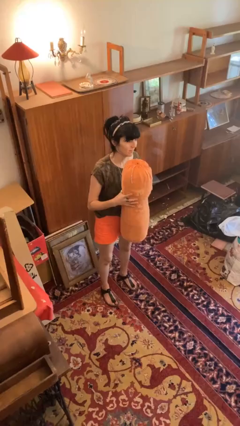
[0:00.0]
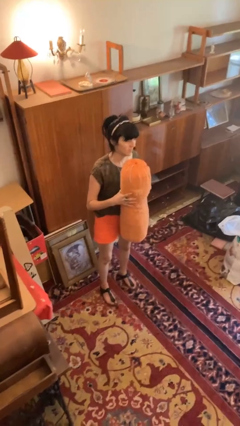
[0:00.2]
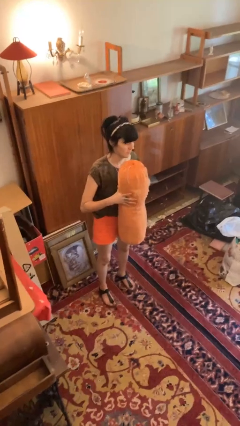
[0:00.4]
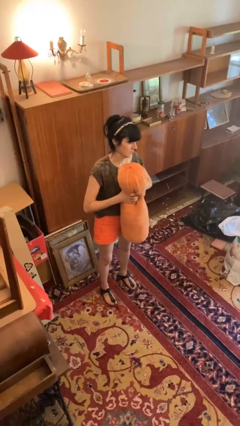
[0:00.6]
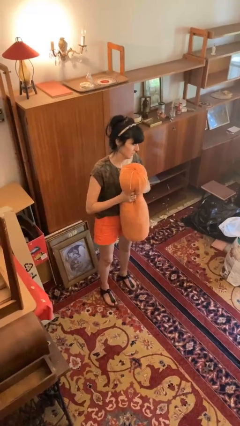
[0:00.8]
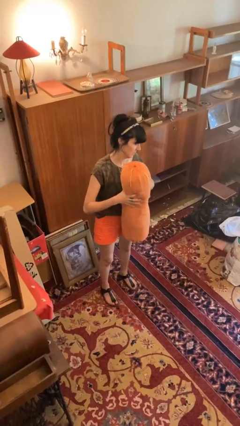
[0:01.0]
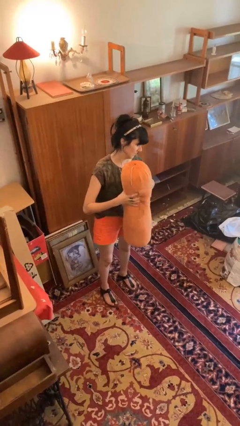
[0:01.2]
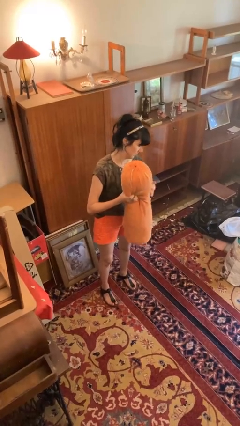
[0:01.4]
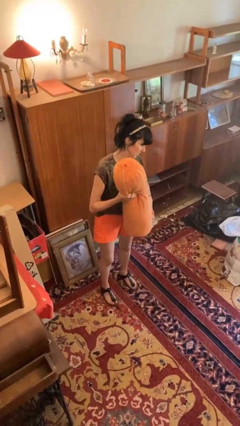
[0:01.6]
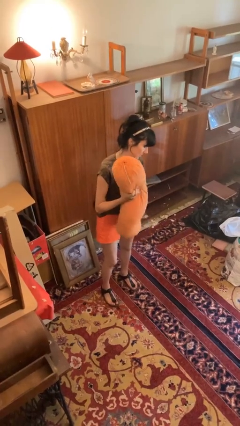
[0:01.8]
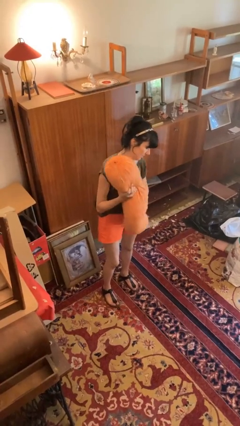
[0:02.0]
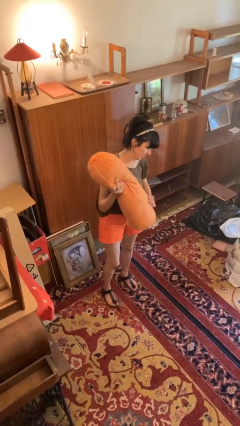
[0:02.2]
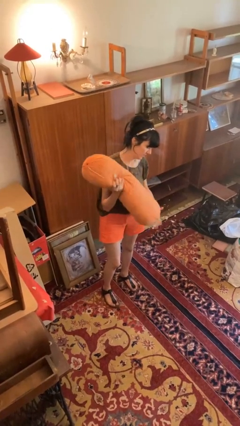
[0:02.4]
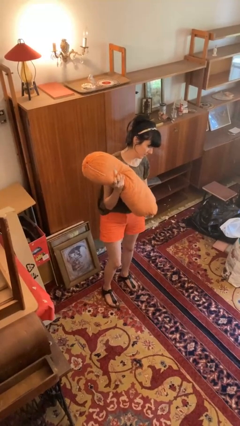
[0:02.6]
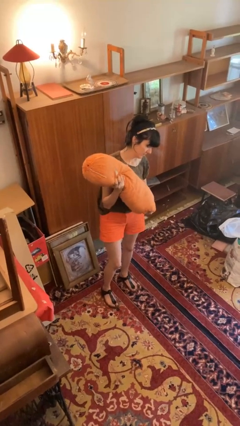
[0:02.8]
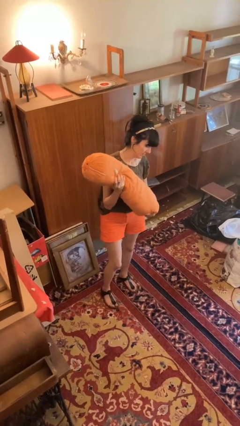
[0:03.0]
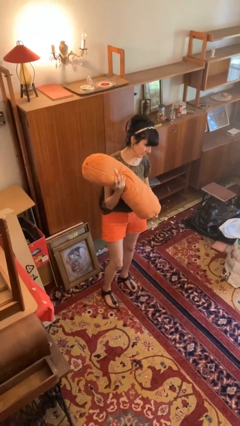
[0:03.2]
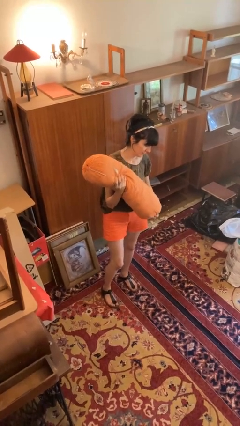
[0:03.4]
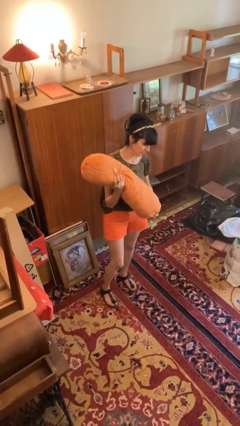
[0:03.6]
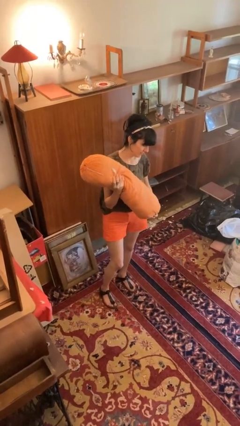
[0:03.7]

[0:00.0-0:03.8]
person squeezes object

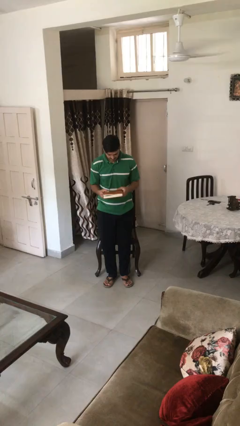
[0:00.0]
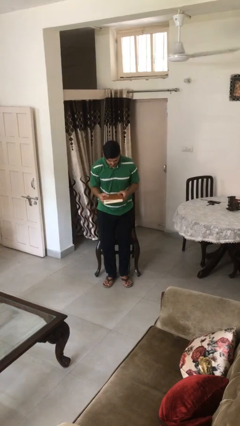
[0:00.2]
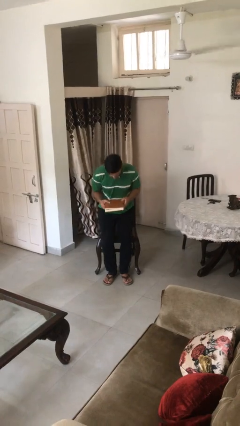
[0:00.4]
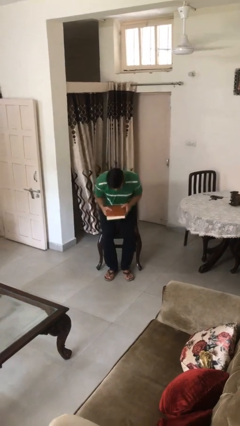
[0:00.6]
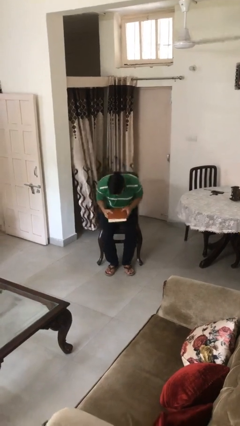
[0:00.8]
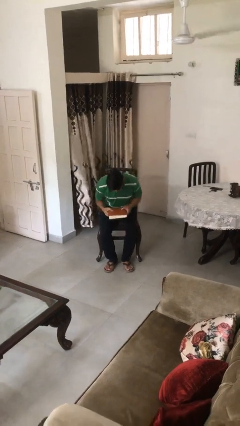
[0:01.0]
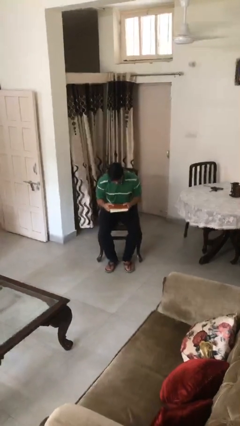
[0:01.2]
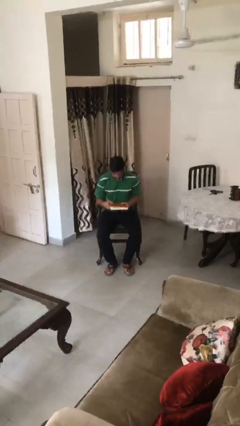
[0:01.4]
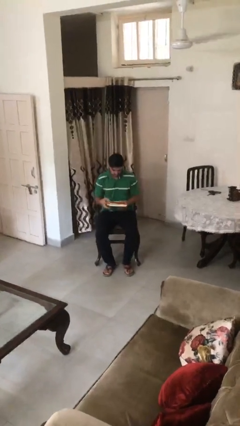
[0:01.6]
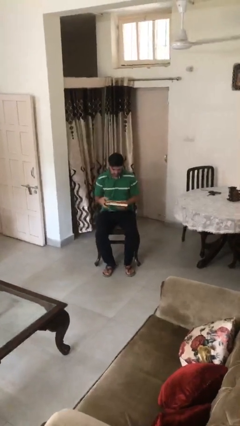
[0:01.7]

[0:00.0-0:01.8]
person sits down

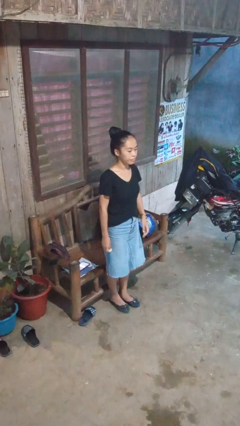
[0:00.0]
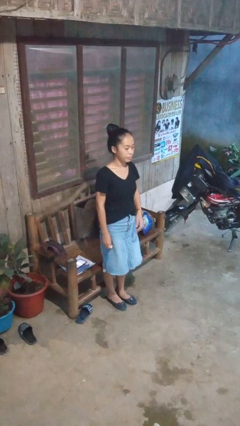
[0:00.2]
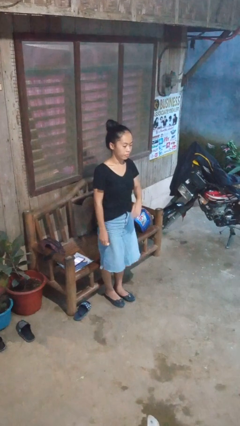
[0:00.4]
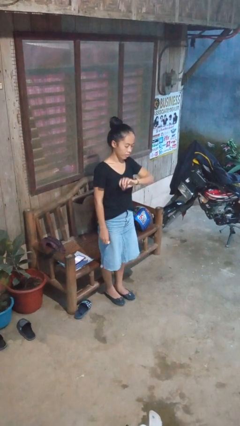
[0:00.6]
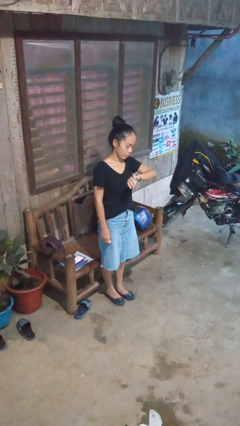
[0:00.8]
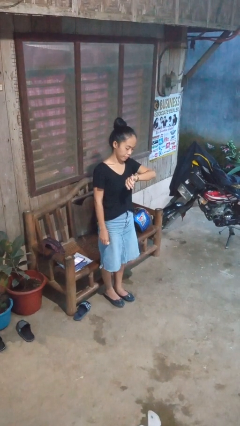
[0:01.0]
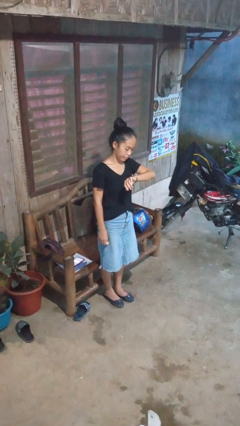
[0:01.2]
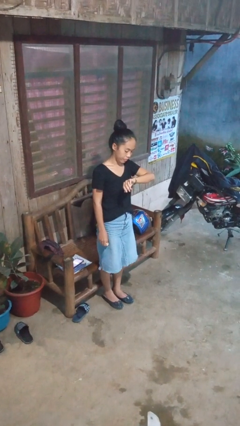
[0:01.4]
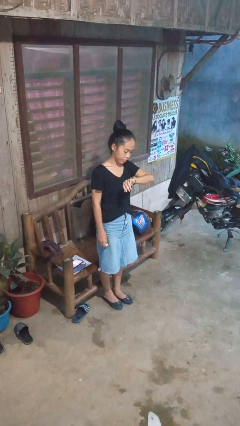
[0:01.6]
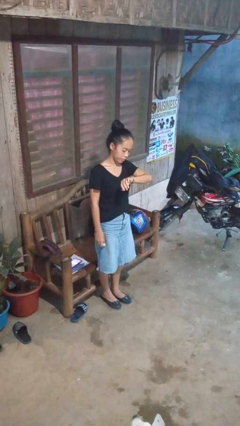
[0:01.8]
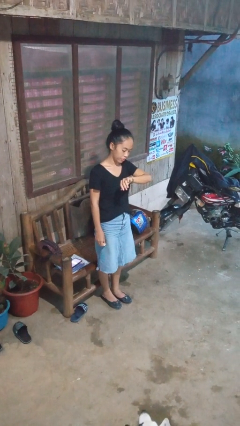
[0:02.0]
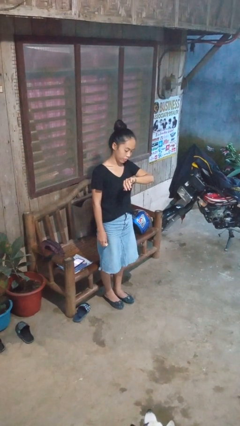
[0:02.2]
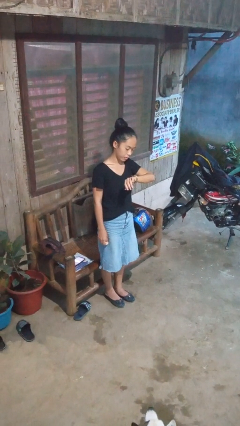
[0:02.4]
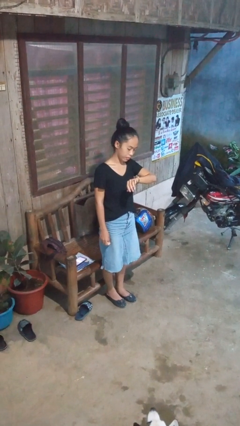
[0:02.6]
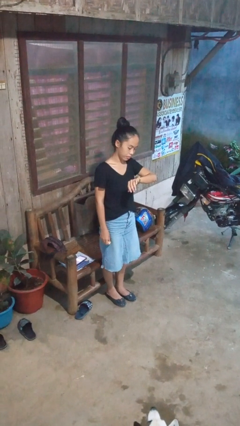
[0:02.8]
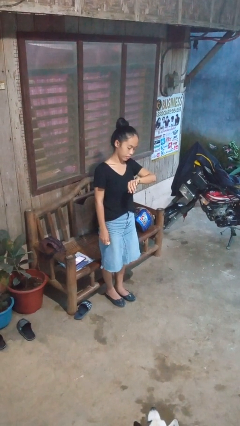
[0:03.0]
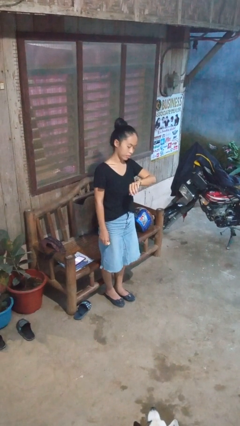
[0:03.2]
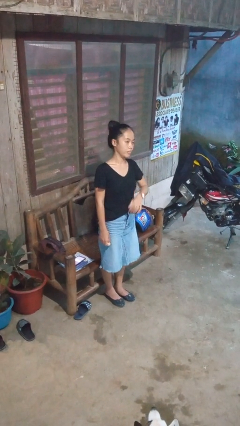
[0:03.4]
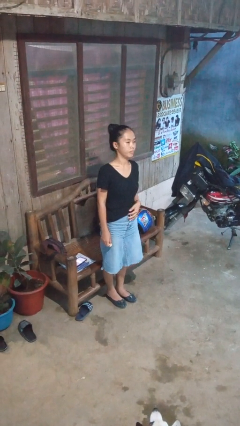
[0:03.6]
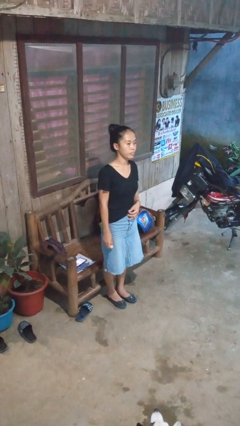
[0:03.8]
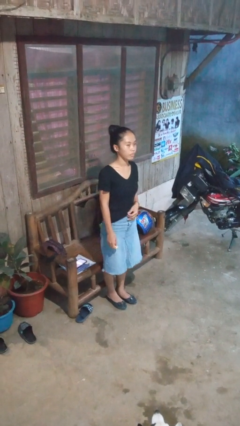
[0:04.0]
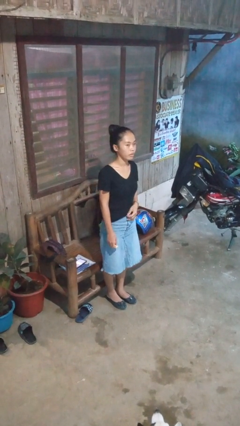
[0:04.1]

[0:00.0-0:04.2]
person looks at wristwatch

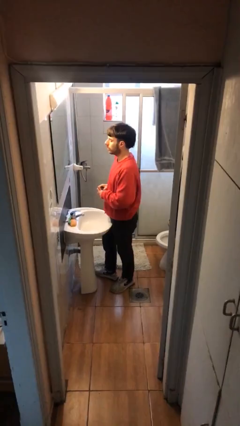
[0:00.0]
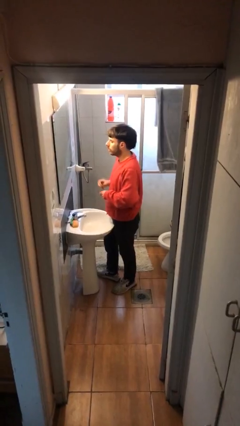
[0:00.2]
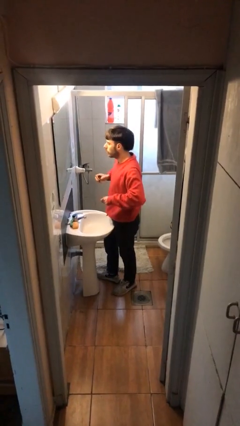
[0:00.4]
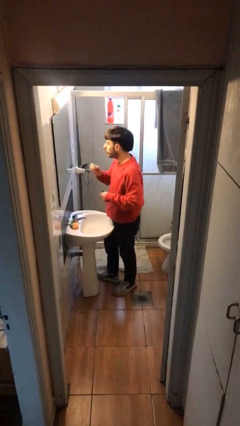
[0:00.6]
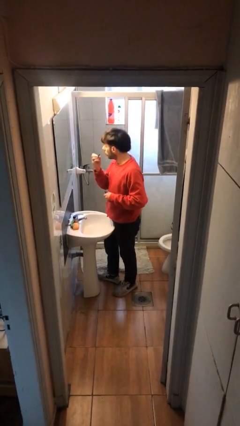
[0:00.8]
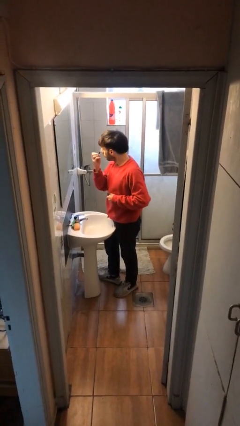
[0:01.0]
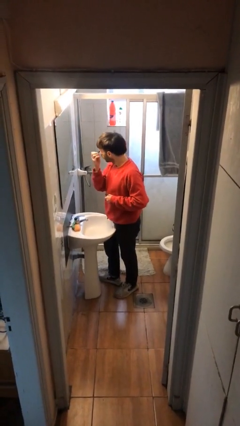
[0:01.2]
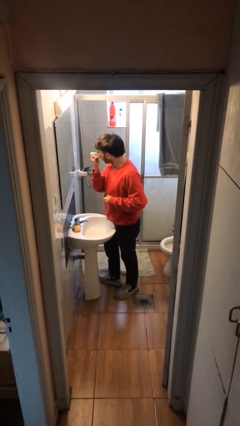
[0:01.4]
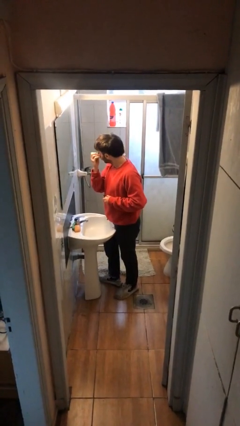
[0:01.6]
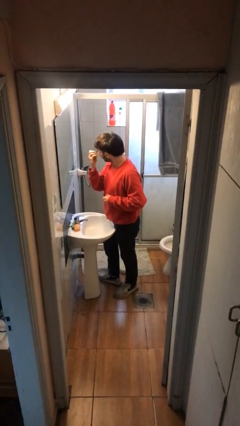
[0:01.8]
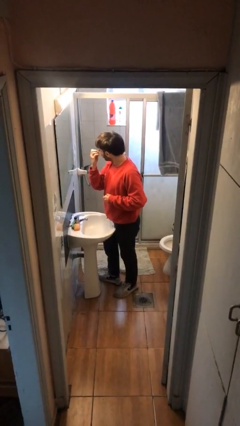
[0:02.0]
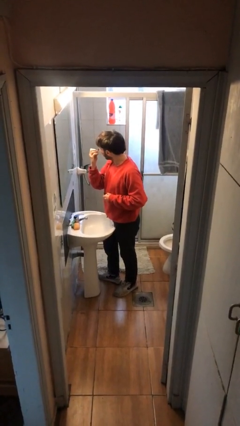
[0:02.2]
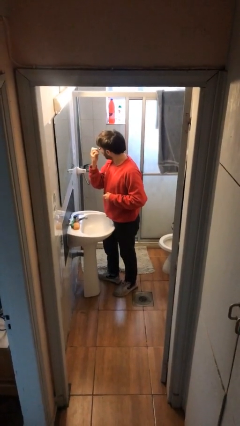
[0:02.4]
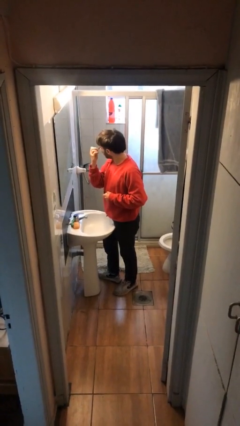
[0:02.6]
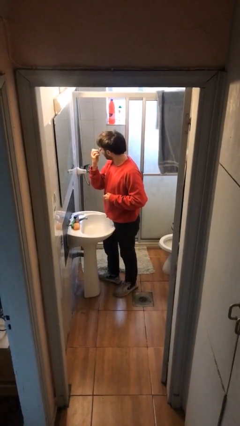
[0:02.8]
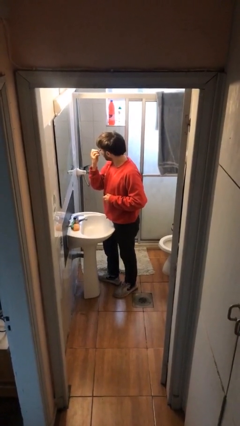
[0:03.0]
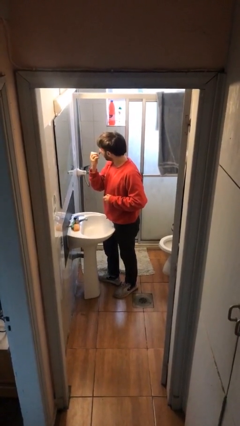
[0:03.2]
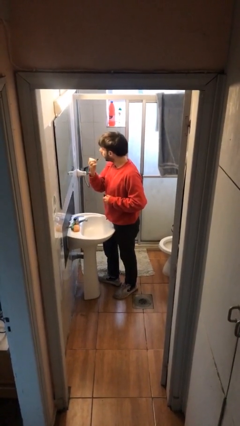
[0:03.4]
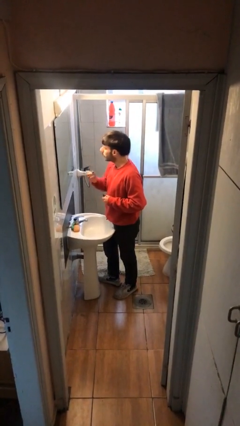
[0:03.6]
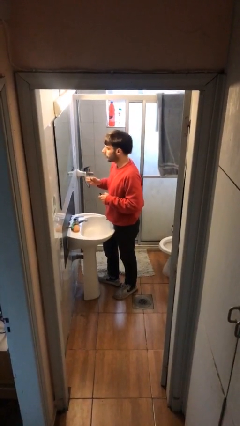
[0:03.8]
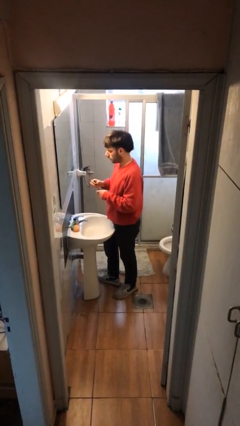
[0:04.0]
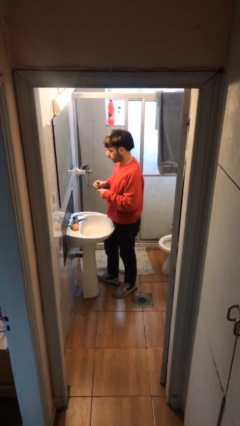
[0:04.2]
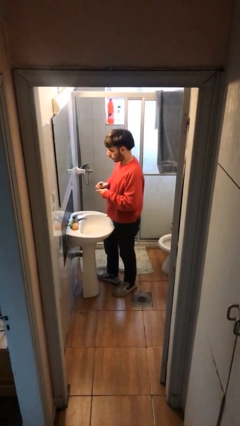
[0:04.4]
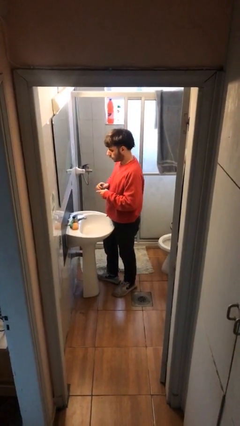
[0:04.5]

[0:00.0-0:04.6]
person applies eye makeup

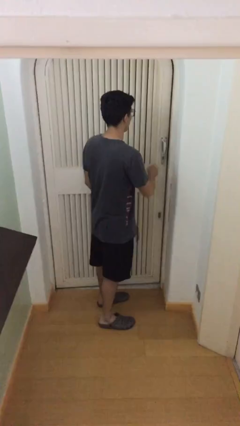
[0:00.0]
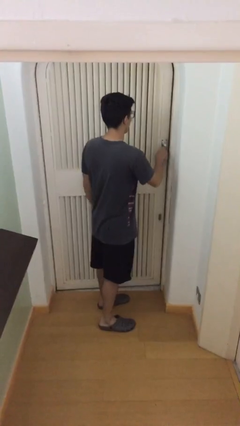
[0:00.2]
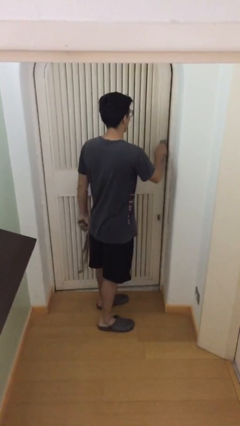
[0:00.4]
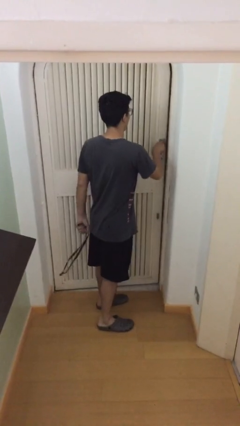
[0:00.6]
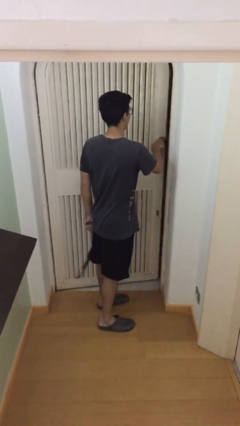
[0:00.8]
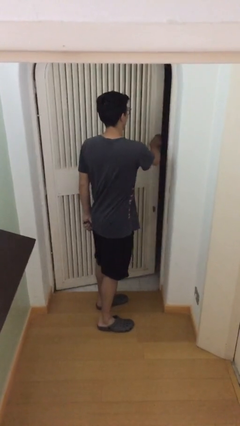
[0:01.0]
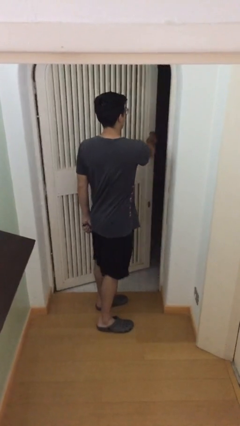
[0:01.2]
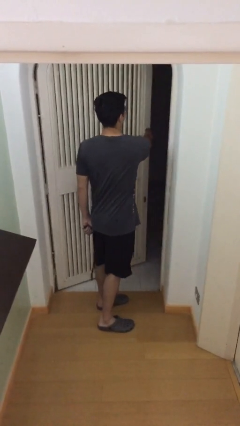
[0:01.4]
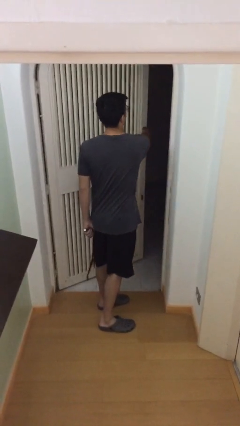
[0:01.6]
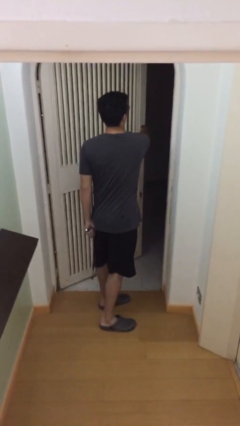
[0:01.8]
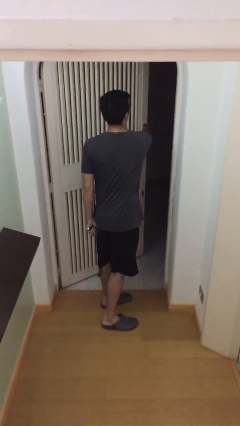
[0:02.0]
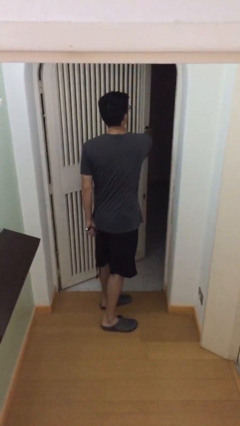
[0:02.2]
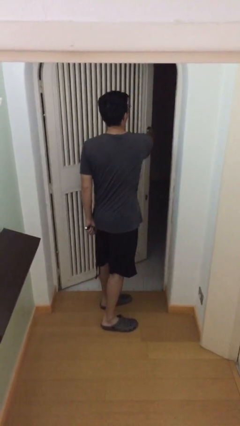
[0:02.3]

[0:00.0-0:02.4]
person opens facility door

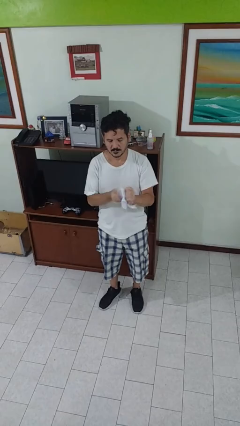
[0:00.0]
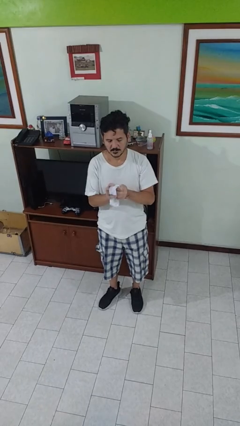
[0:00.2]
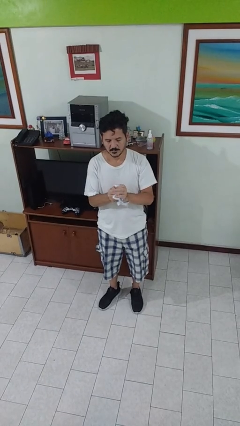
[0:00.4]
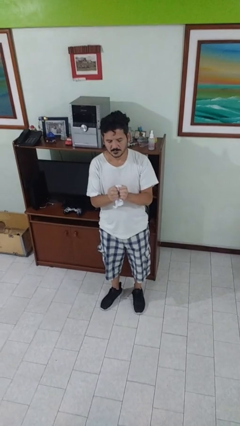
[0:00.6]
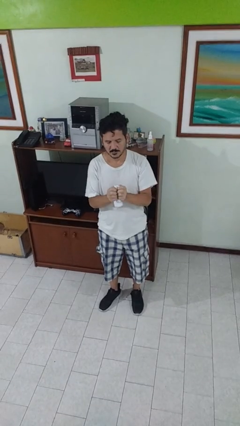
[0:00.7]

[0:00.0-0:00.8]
person crumples paper

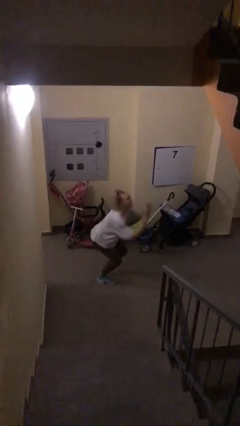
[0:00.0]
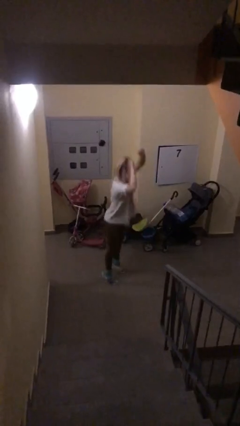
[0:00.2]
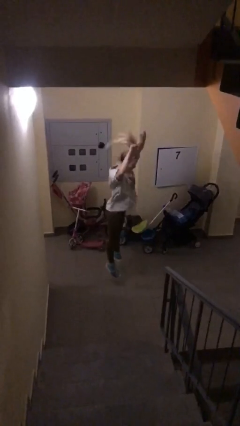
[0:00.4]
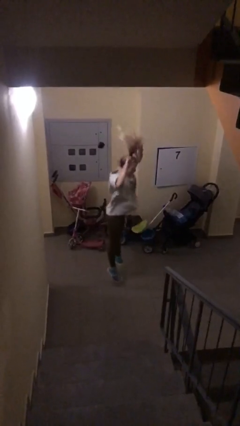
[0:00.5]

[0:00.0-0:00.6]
person jumps
